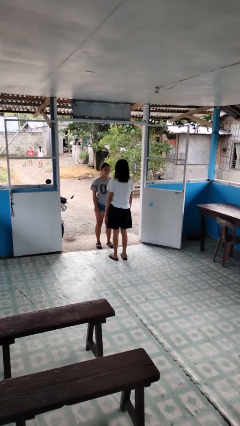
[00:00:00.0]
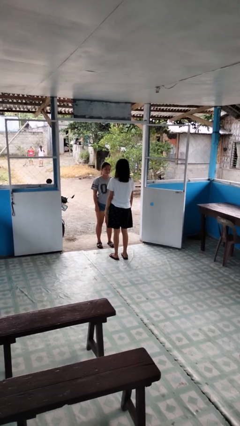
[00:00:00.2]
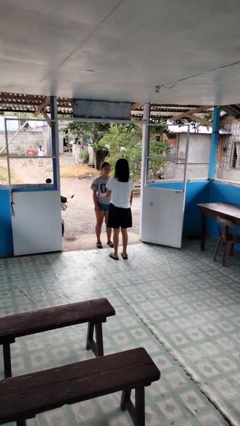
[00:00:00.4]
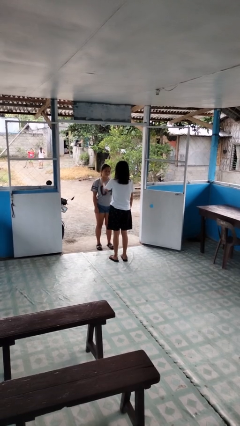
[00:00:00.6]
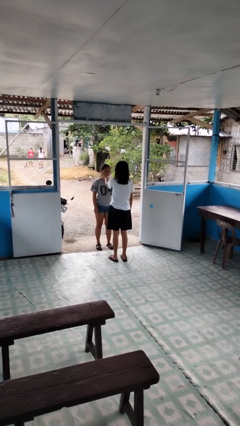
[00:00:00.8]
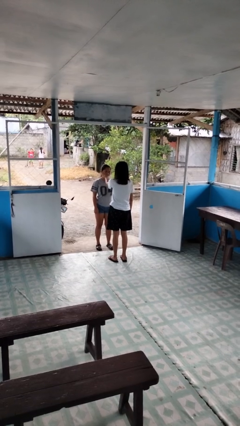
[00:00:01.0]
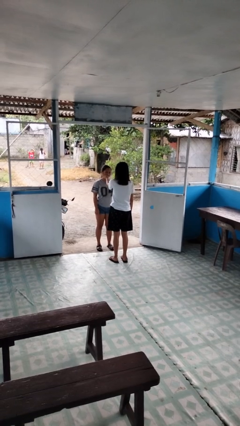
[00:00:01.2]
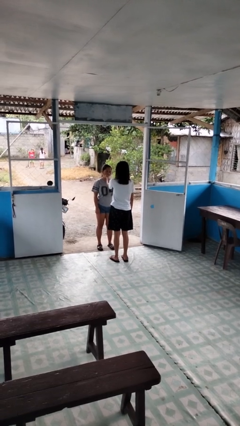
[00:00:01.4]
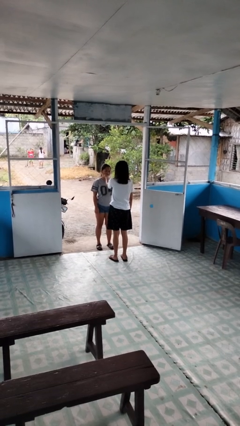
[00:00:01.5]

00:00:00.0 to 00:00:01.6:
person touches face of person

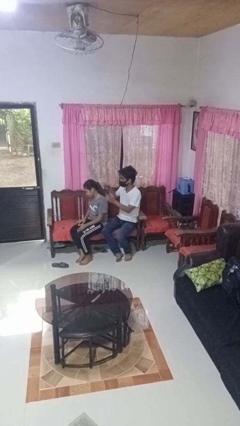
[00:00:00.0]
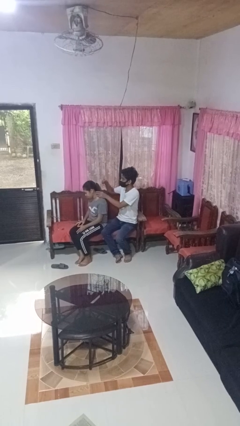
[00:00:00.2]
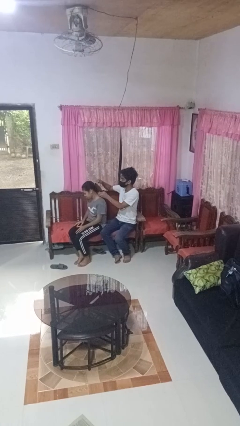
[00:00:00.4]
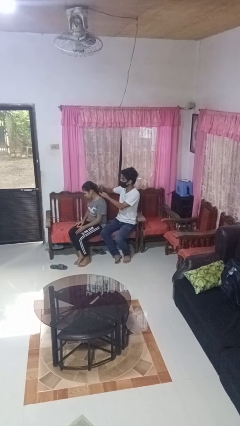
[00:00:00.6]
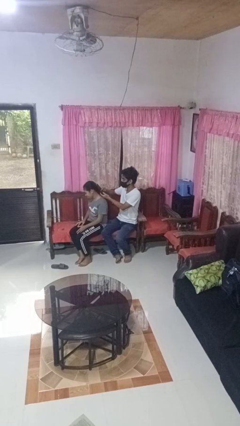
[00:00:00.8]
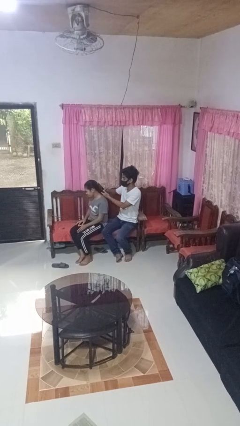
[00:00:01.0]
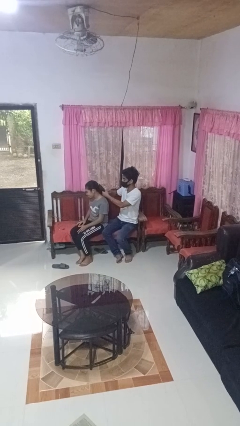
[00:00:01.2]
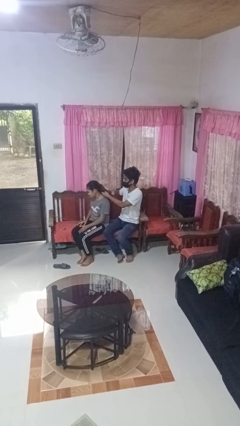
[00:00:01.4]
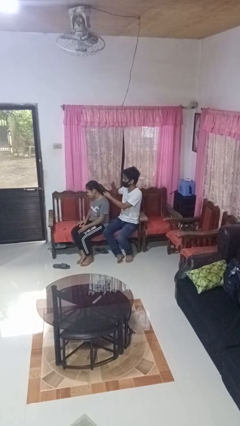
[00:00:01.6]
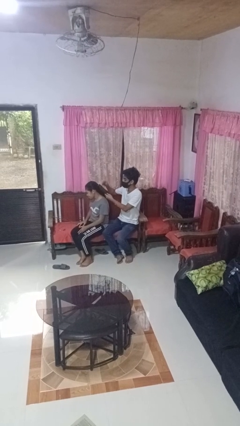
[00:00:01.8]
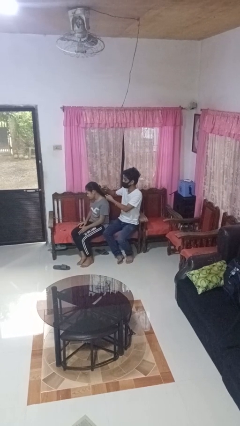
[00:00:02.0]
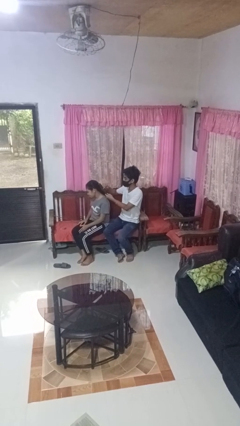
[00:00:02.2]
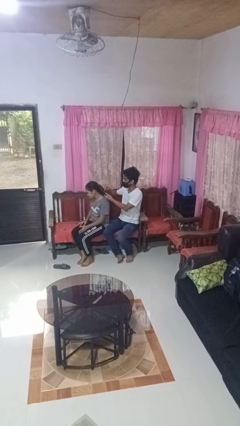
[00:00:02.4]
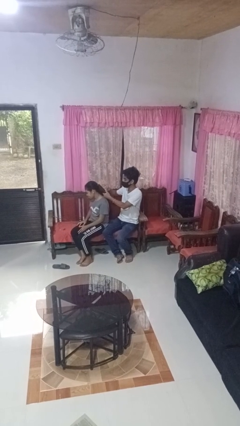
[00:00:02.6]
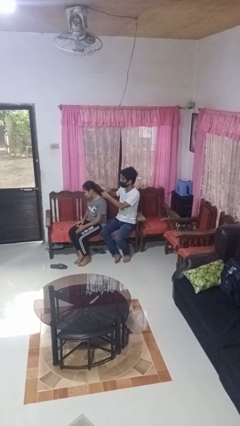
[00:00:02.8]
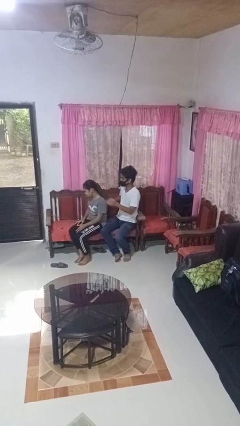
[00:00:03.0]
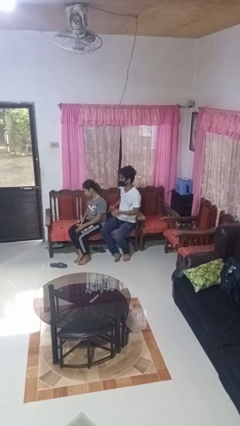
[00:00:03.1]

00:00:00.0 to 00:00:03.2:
person brushes hair of person

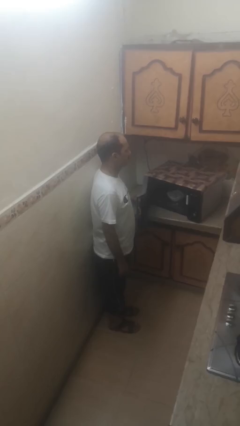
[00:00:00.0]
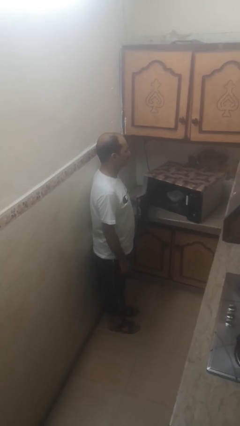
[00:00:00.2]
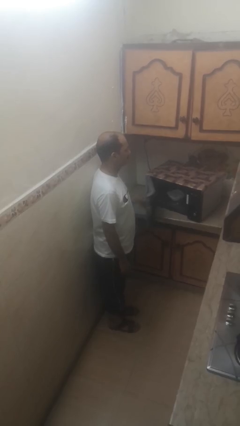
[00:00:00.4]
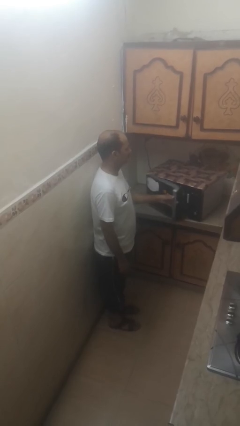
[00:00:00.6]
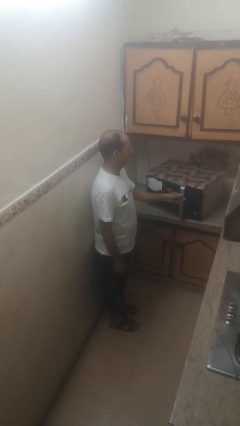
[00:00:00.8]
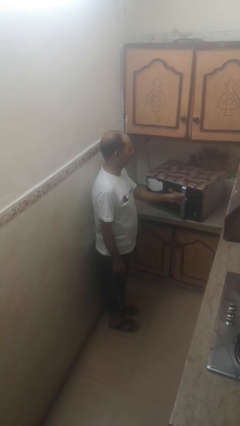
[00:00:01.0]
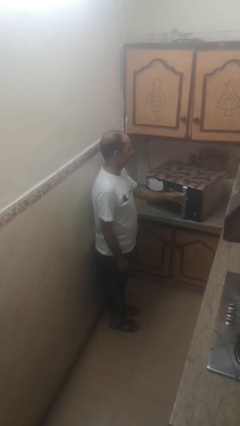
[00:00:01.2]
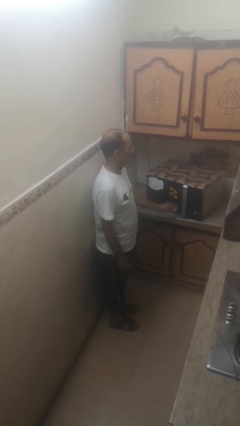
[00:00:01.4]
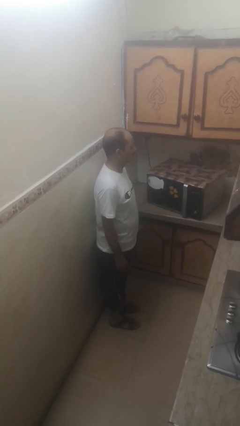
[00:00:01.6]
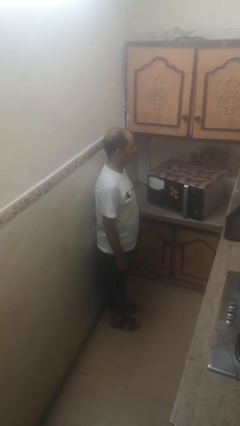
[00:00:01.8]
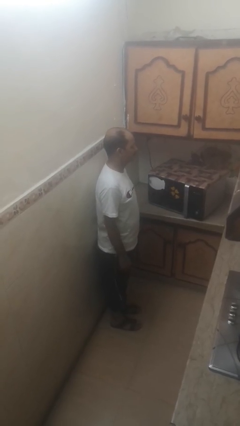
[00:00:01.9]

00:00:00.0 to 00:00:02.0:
person closes microwave

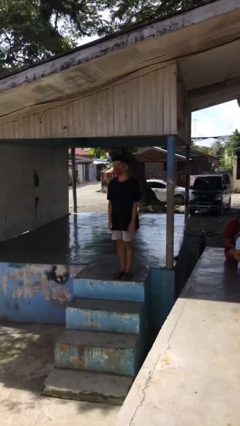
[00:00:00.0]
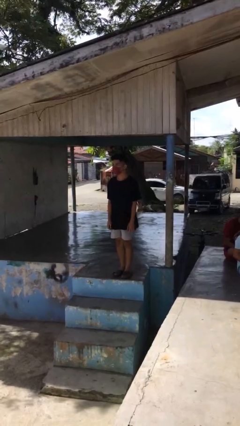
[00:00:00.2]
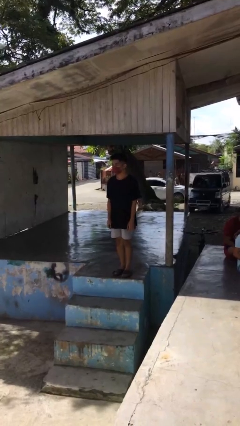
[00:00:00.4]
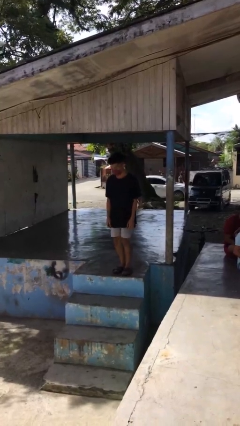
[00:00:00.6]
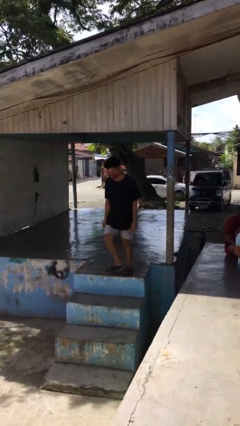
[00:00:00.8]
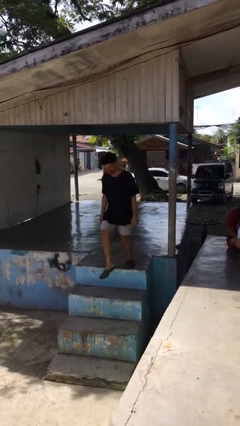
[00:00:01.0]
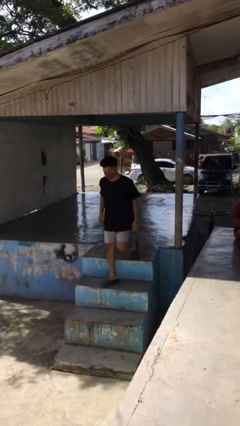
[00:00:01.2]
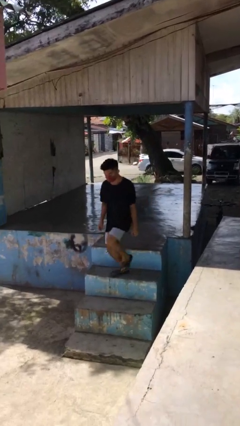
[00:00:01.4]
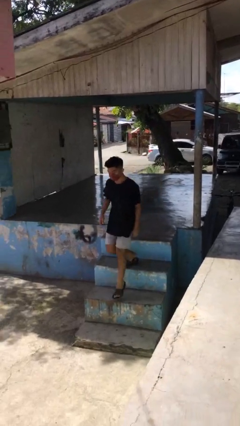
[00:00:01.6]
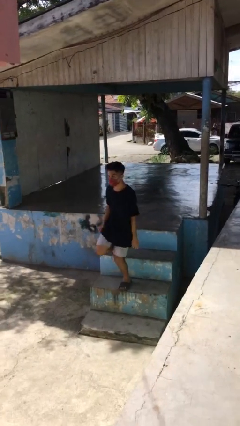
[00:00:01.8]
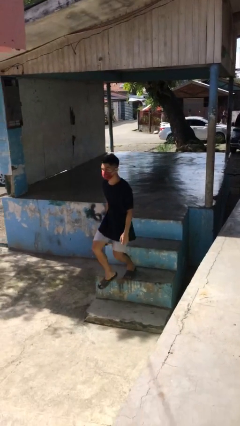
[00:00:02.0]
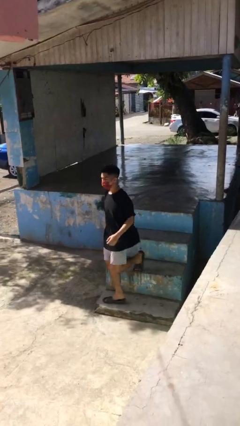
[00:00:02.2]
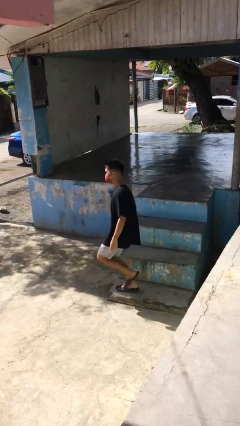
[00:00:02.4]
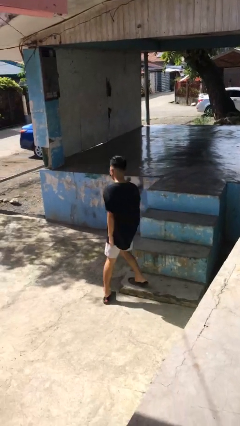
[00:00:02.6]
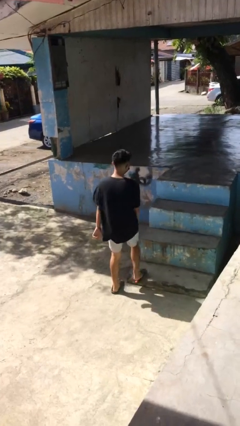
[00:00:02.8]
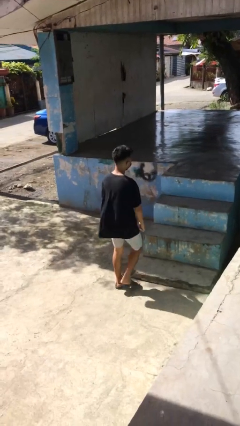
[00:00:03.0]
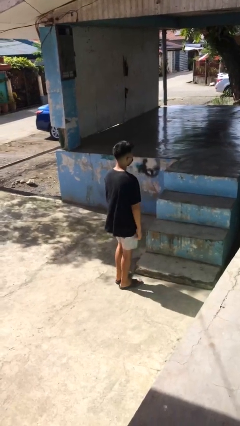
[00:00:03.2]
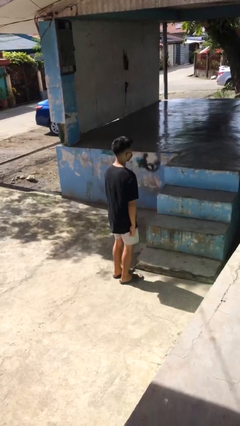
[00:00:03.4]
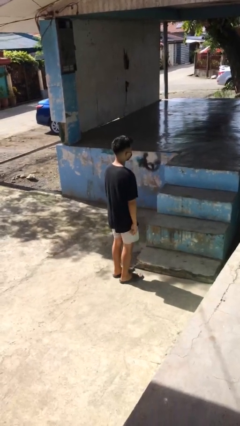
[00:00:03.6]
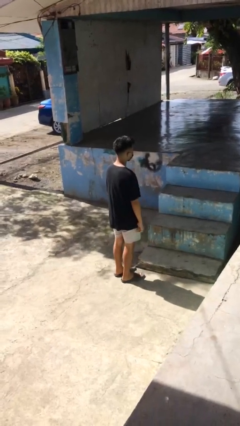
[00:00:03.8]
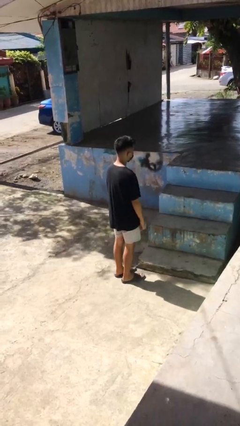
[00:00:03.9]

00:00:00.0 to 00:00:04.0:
person climbs down stairs

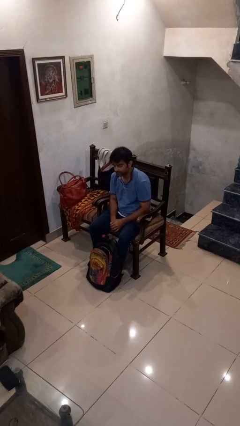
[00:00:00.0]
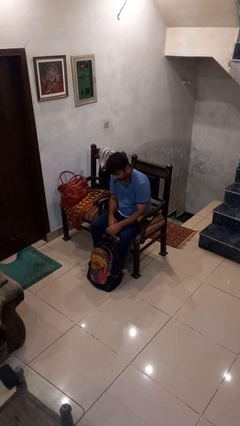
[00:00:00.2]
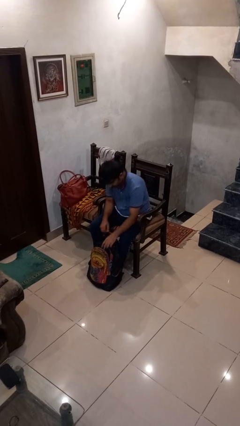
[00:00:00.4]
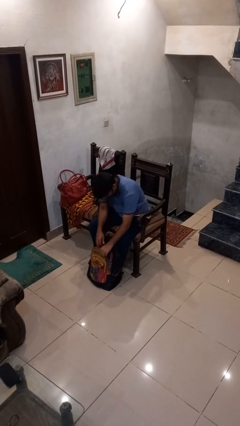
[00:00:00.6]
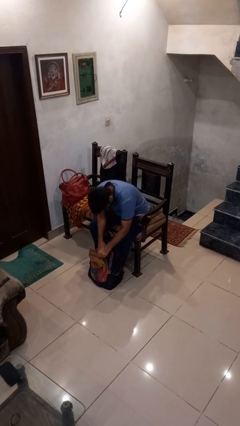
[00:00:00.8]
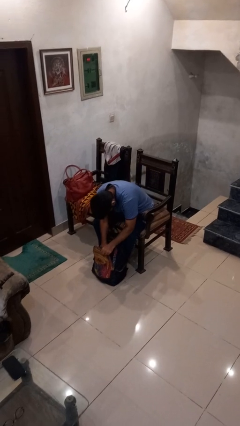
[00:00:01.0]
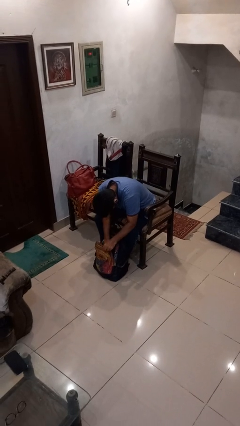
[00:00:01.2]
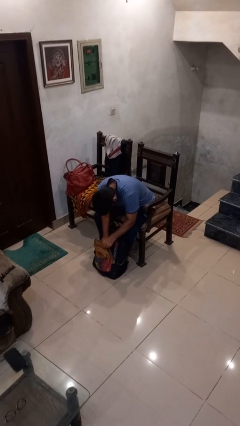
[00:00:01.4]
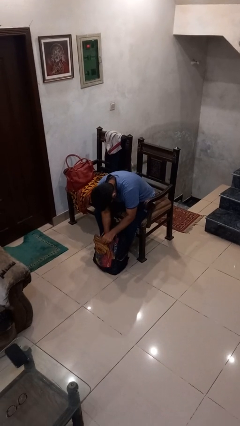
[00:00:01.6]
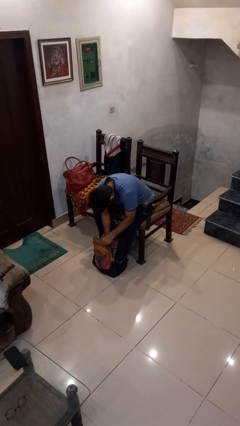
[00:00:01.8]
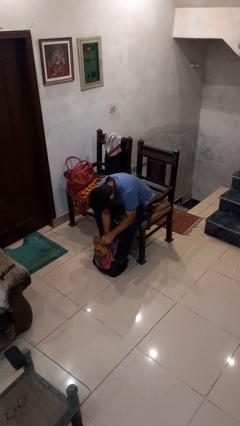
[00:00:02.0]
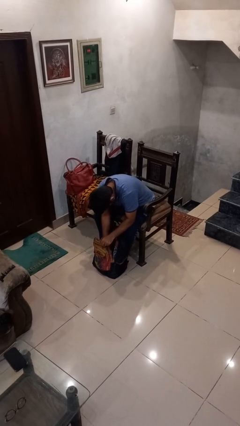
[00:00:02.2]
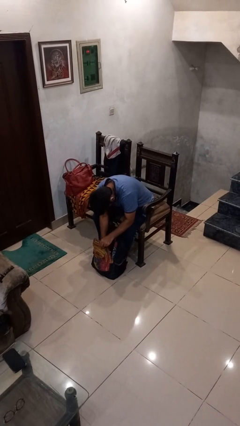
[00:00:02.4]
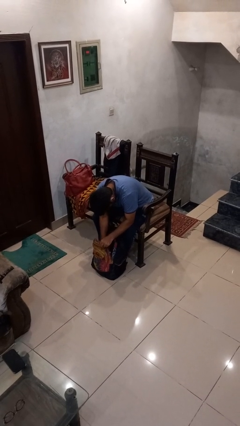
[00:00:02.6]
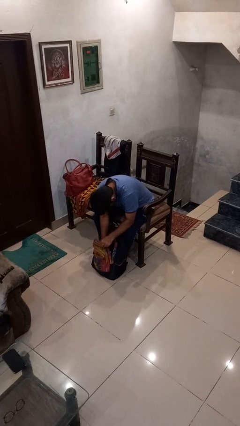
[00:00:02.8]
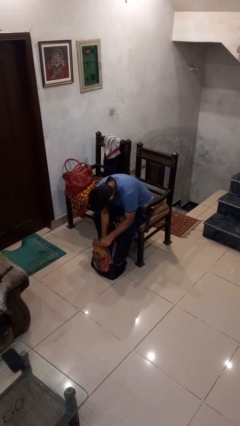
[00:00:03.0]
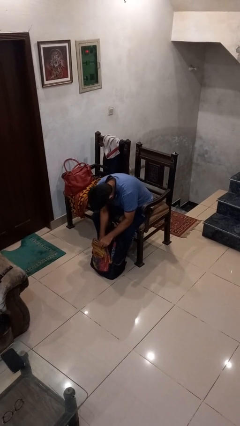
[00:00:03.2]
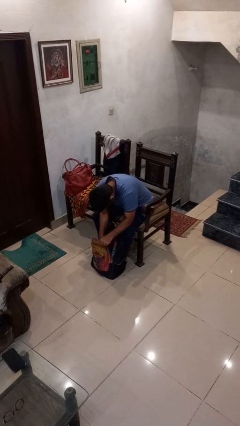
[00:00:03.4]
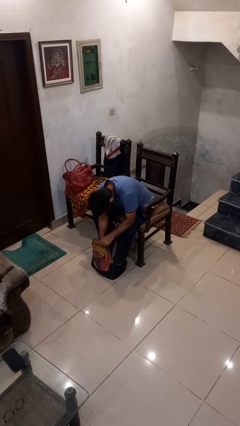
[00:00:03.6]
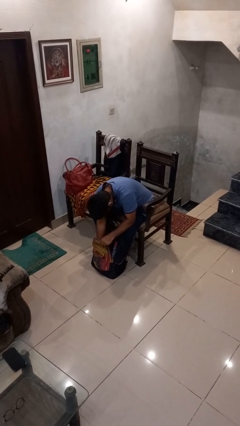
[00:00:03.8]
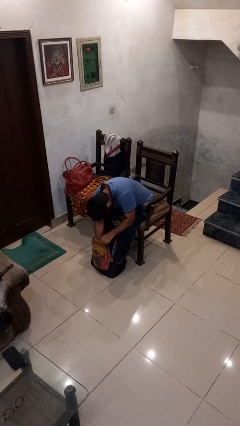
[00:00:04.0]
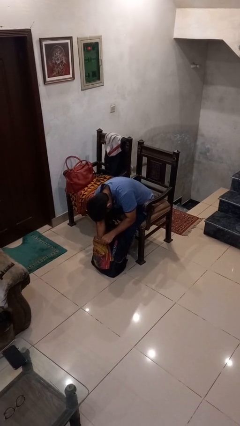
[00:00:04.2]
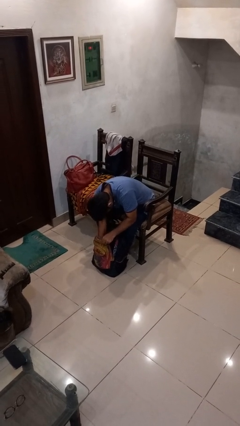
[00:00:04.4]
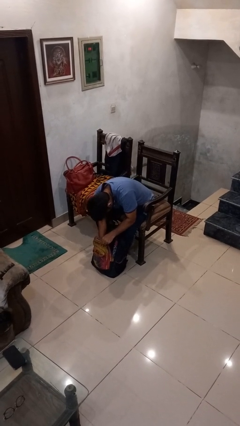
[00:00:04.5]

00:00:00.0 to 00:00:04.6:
person searches in backpack

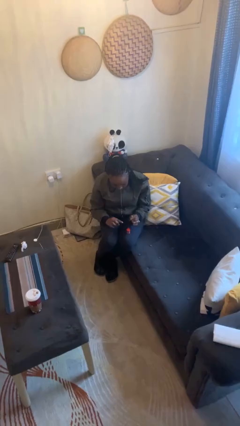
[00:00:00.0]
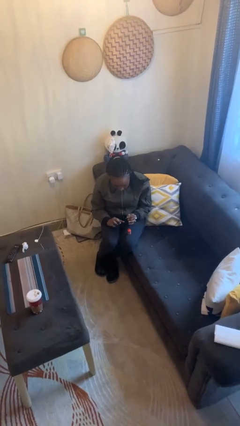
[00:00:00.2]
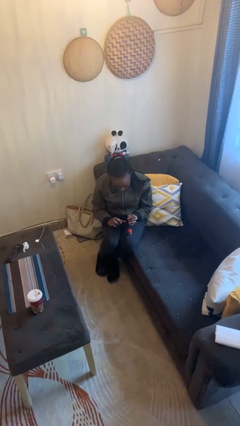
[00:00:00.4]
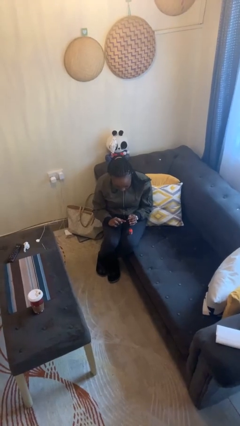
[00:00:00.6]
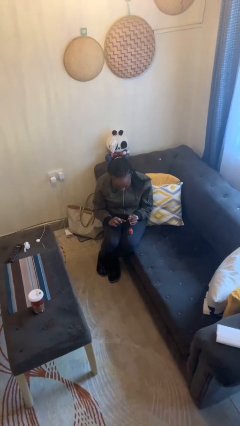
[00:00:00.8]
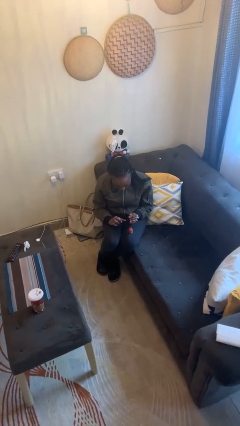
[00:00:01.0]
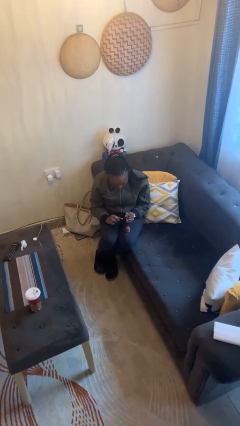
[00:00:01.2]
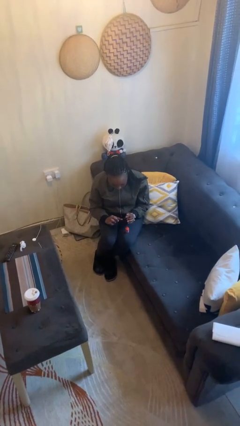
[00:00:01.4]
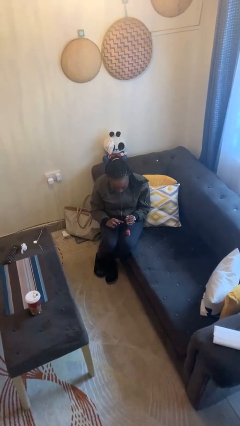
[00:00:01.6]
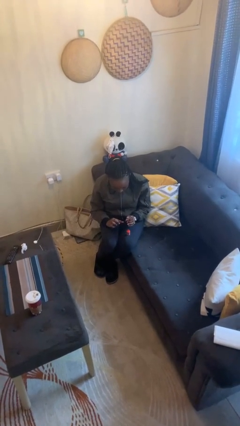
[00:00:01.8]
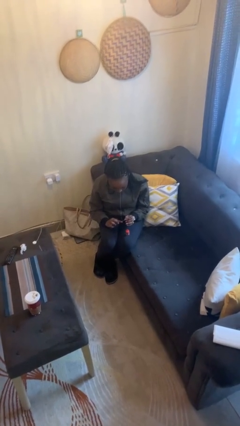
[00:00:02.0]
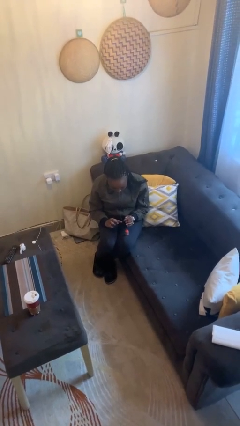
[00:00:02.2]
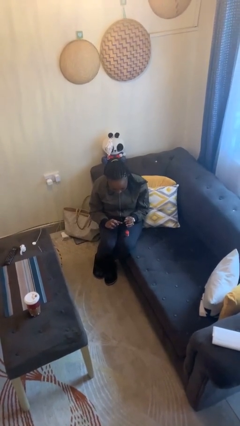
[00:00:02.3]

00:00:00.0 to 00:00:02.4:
person paints fingernails
